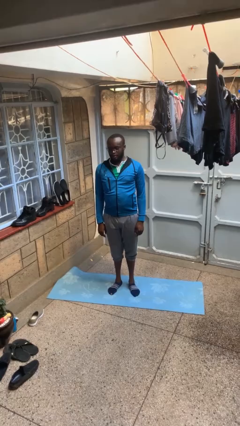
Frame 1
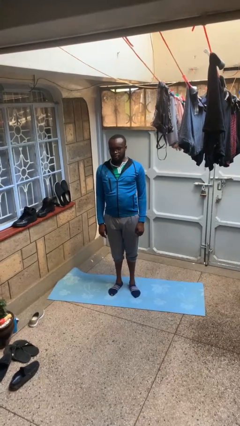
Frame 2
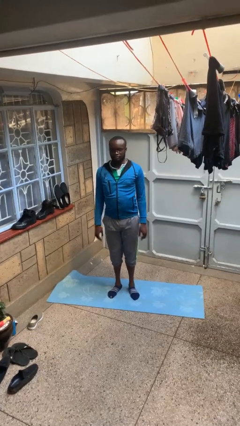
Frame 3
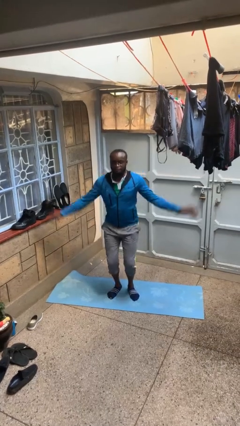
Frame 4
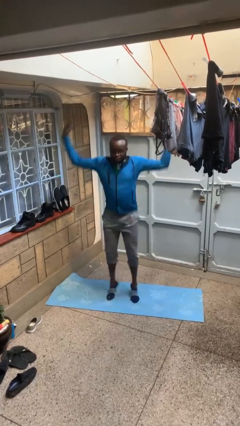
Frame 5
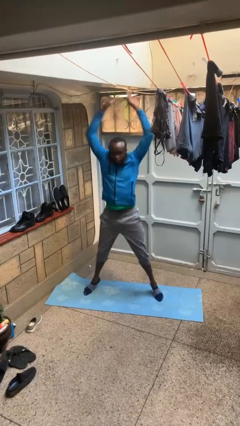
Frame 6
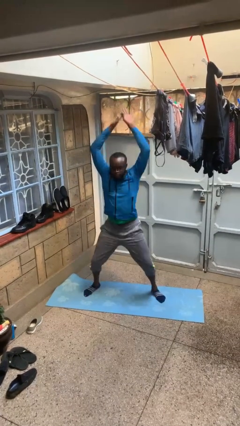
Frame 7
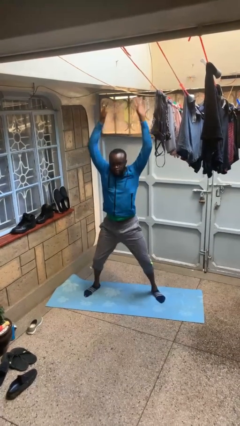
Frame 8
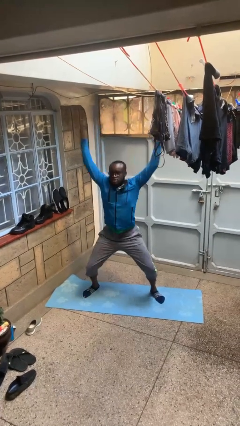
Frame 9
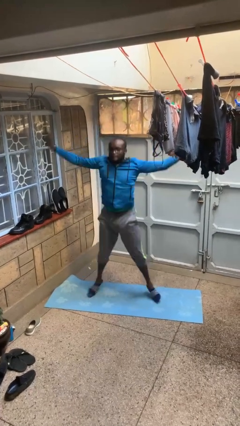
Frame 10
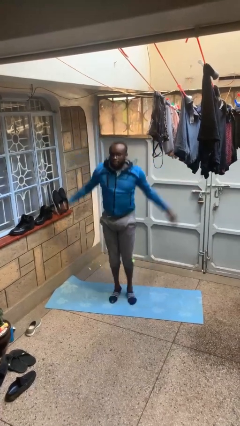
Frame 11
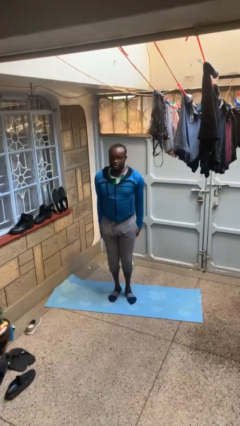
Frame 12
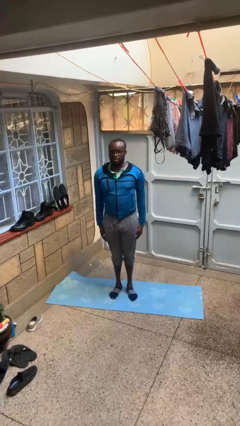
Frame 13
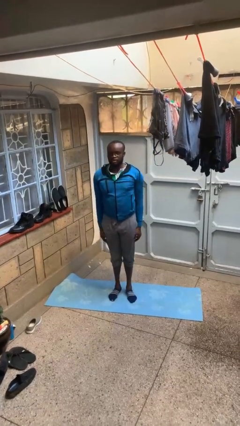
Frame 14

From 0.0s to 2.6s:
person exercises with jumping jacks

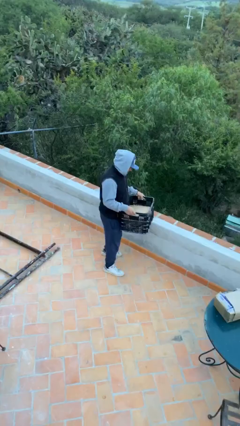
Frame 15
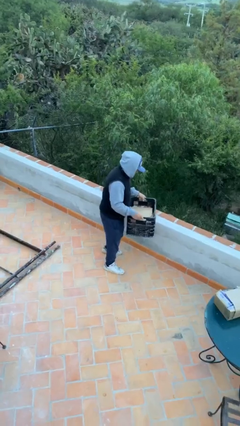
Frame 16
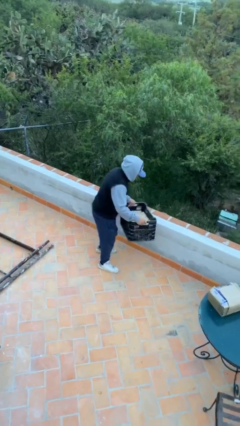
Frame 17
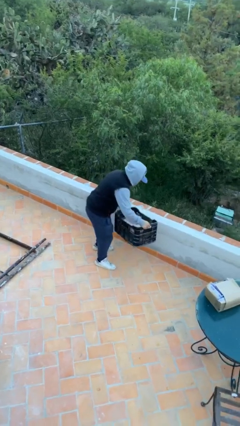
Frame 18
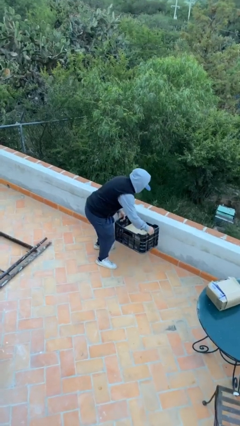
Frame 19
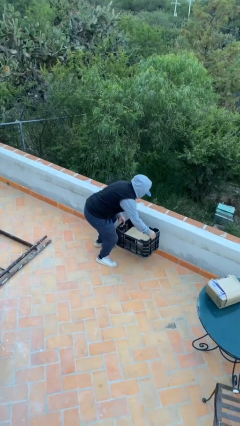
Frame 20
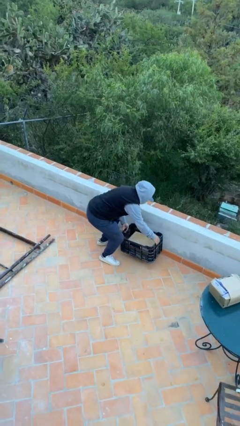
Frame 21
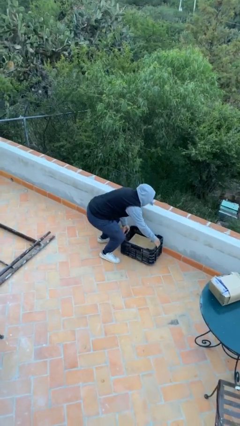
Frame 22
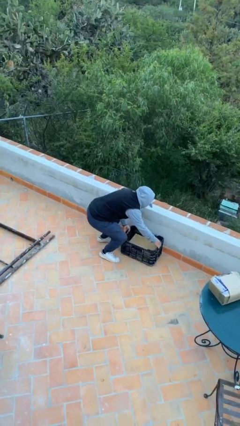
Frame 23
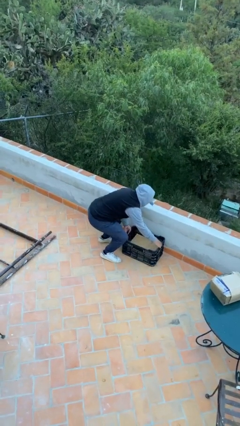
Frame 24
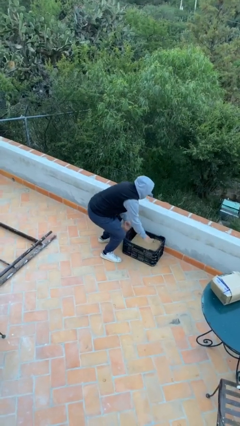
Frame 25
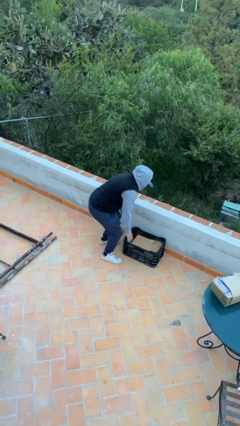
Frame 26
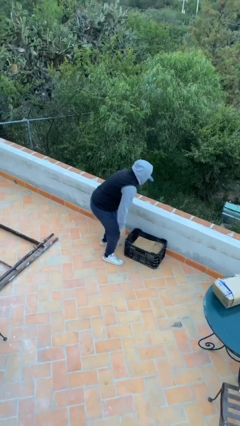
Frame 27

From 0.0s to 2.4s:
person puts down object on floor

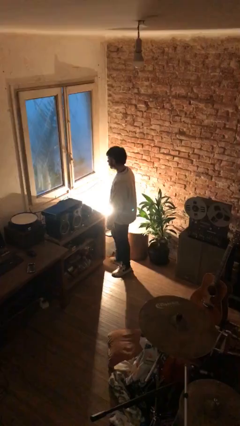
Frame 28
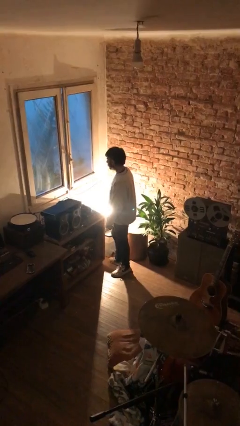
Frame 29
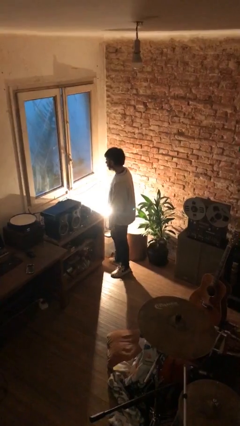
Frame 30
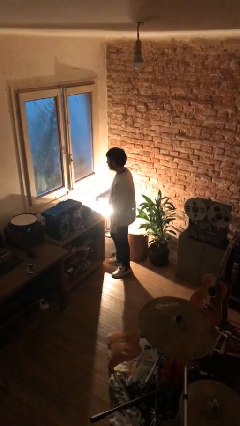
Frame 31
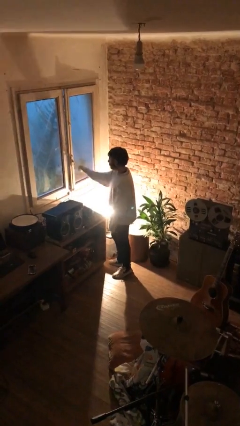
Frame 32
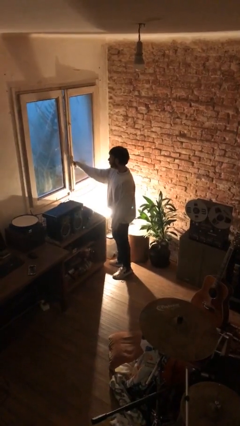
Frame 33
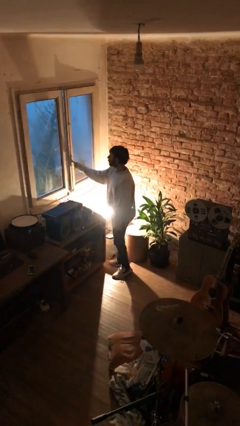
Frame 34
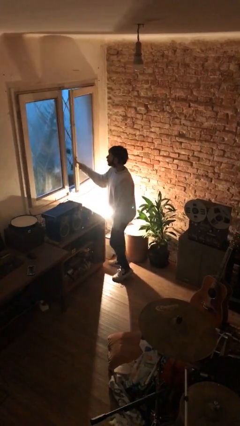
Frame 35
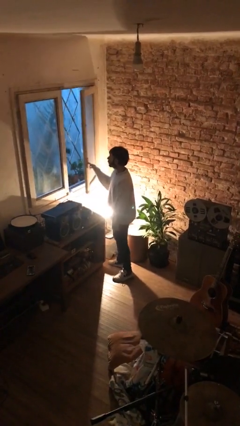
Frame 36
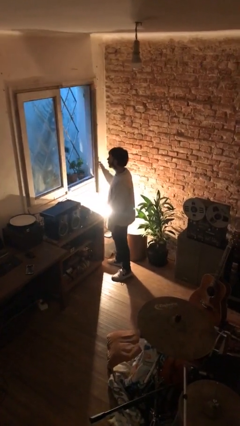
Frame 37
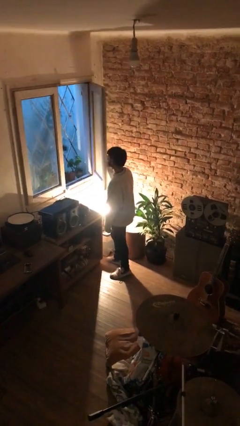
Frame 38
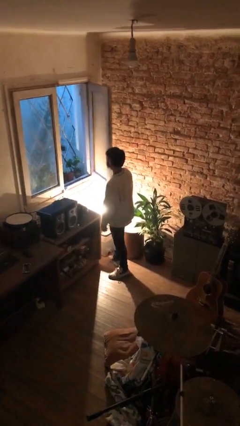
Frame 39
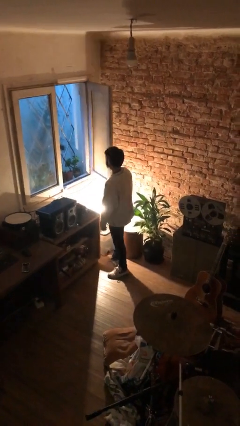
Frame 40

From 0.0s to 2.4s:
person opens home window

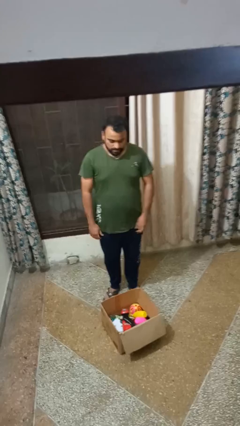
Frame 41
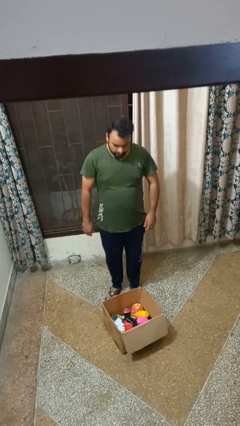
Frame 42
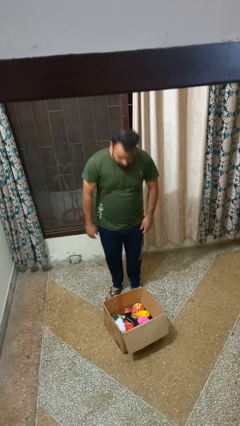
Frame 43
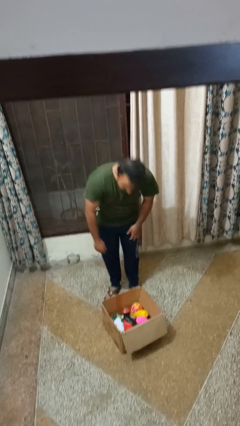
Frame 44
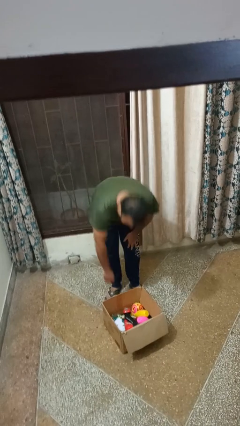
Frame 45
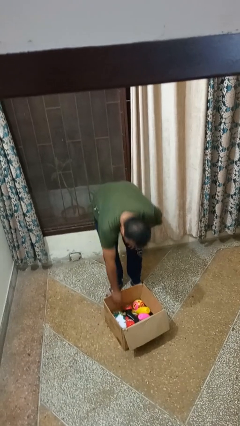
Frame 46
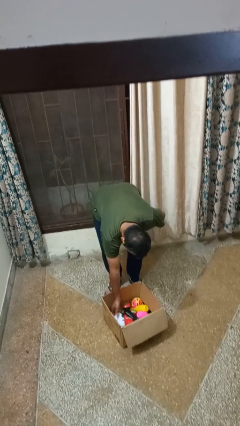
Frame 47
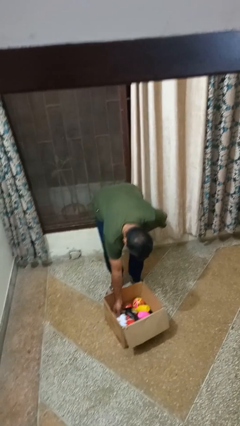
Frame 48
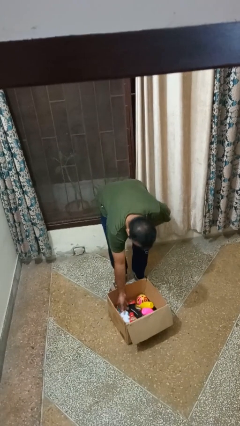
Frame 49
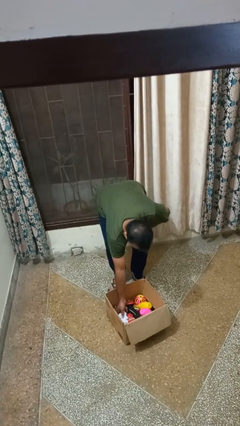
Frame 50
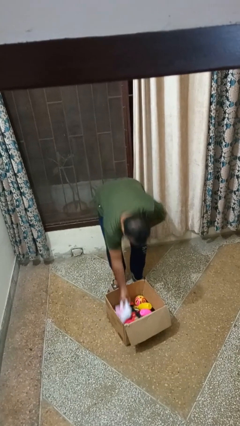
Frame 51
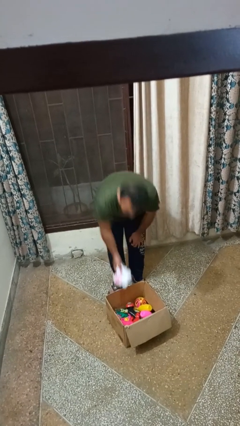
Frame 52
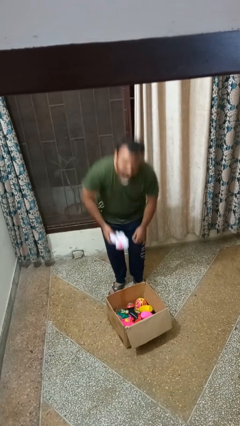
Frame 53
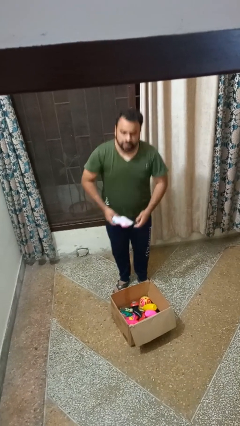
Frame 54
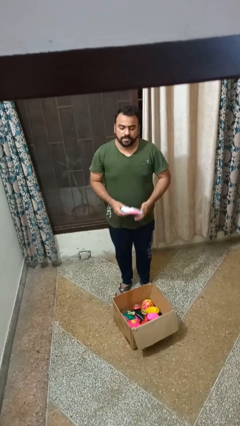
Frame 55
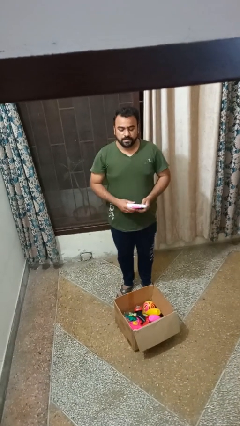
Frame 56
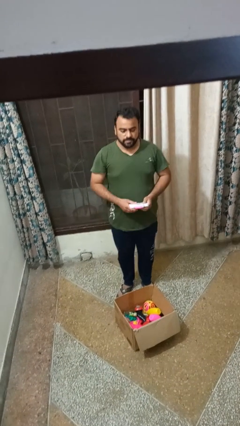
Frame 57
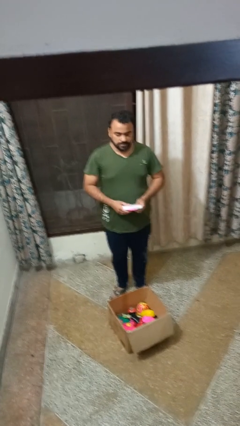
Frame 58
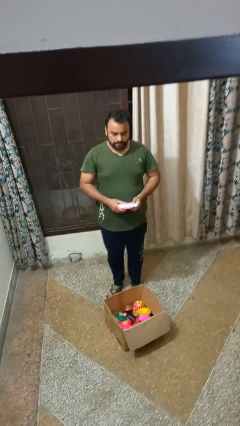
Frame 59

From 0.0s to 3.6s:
person takes object from box

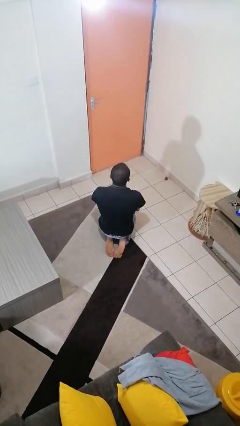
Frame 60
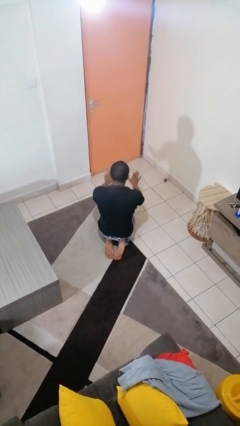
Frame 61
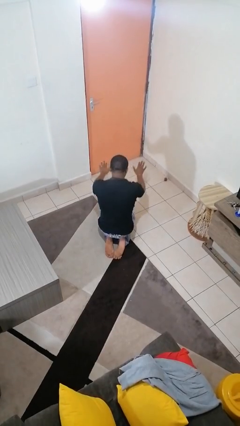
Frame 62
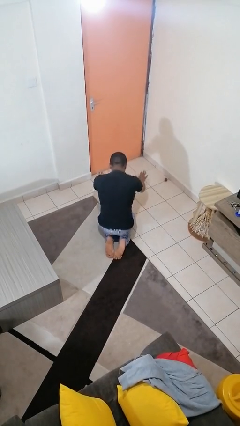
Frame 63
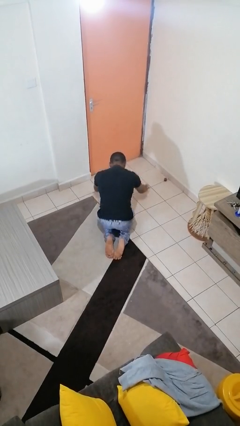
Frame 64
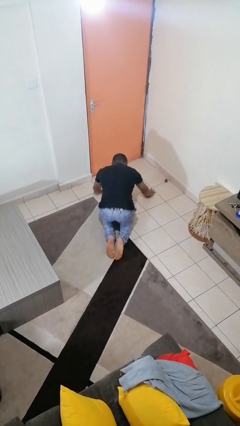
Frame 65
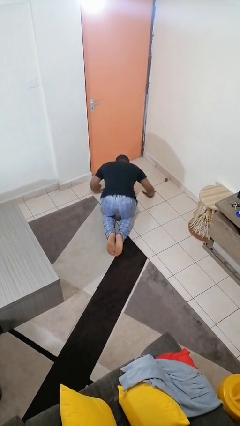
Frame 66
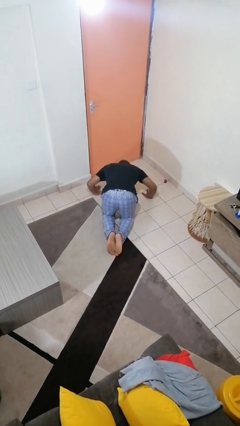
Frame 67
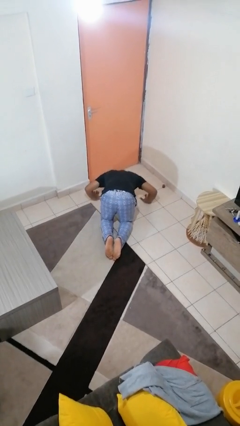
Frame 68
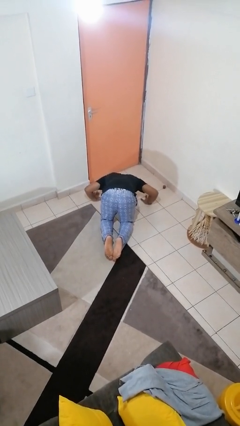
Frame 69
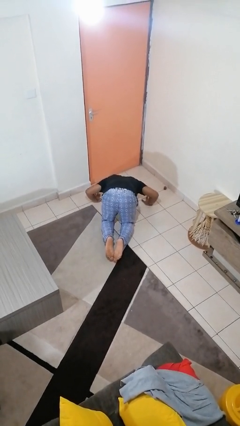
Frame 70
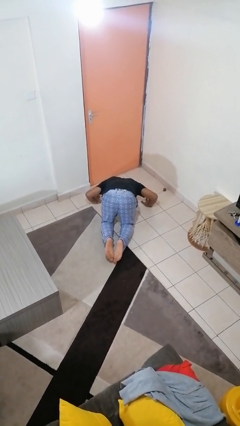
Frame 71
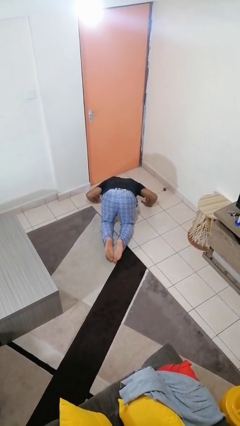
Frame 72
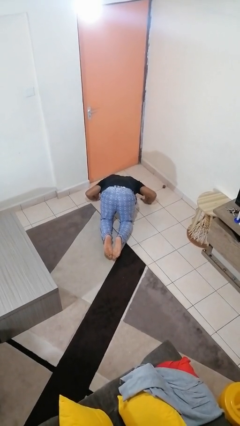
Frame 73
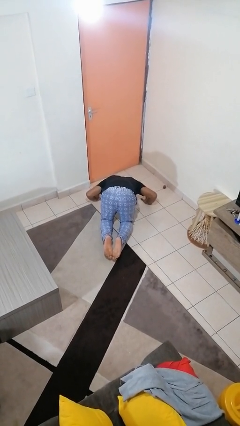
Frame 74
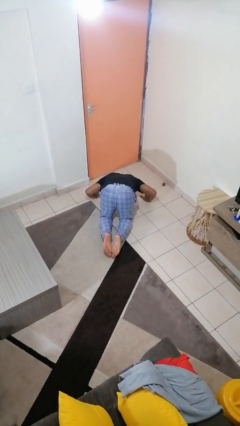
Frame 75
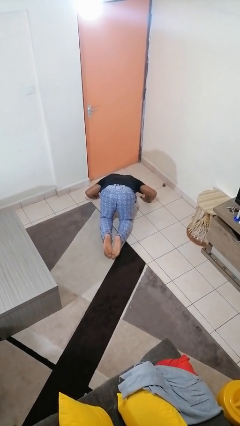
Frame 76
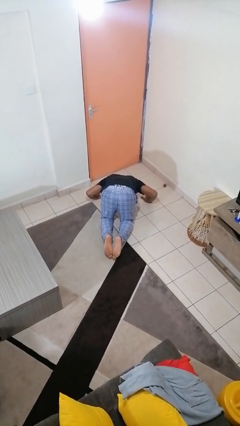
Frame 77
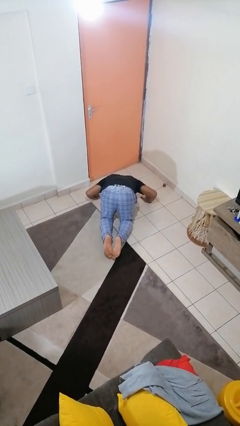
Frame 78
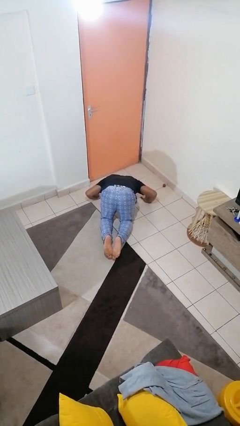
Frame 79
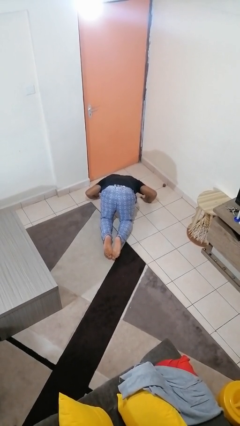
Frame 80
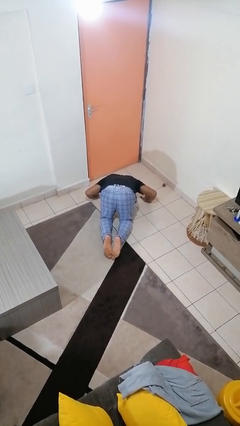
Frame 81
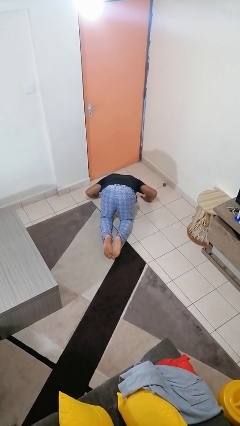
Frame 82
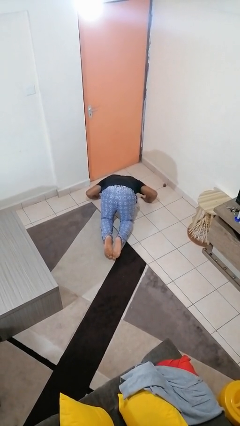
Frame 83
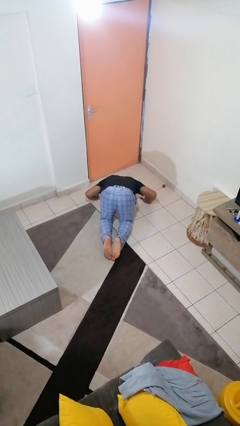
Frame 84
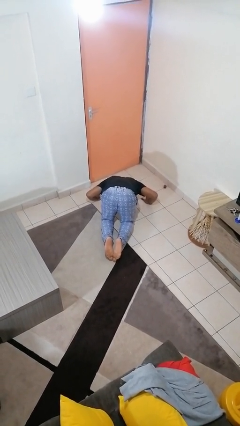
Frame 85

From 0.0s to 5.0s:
person prays

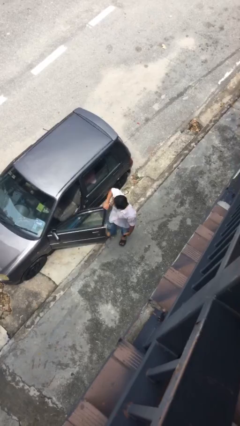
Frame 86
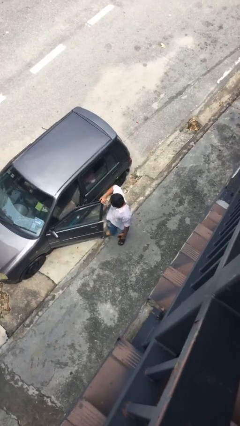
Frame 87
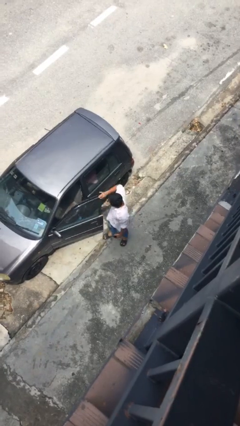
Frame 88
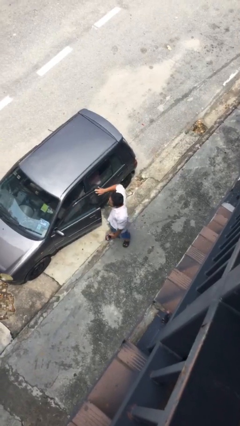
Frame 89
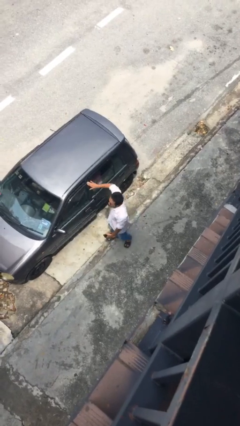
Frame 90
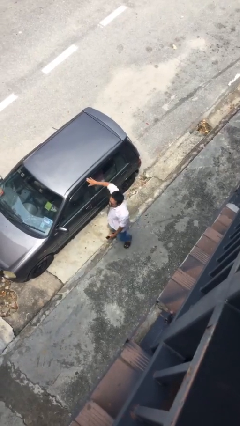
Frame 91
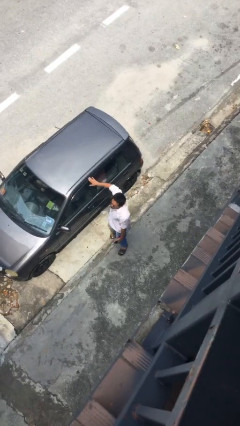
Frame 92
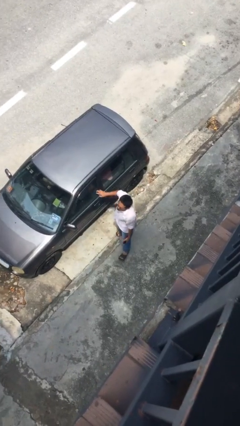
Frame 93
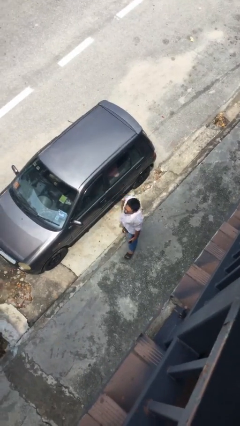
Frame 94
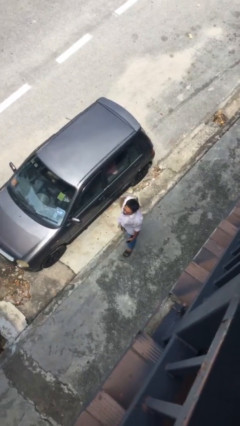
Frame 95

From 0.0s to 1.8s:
person closes car door
